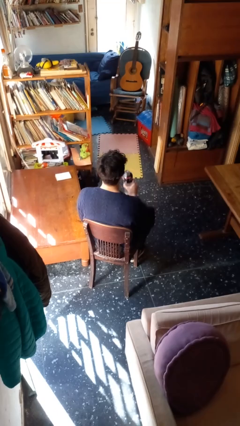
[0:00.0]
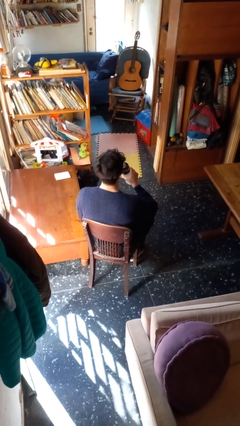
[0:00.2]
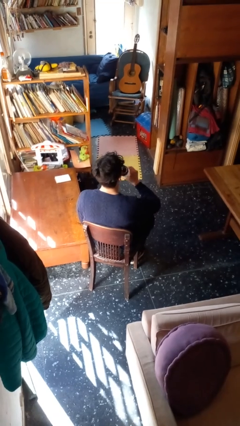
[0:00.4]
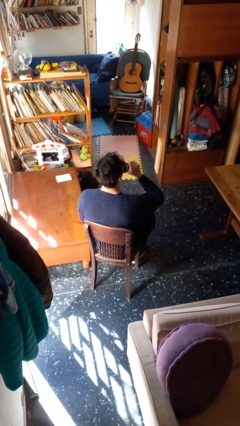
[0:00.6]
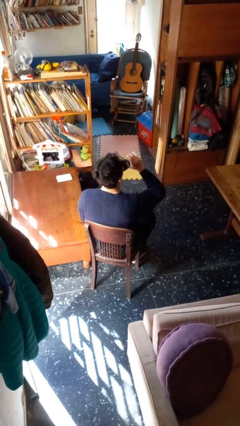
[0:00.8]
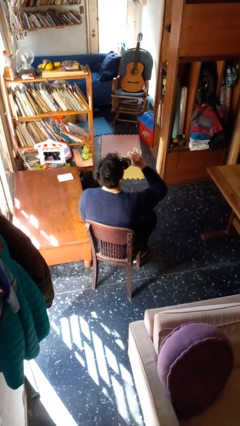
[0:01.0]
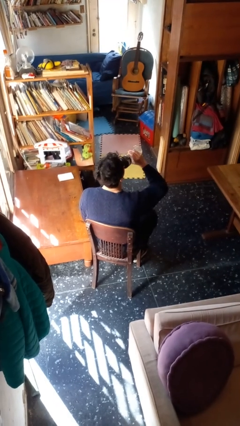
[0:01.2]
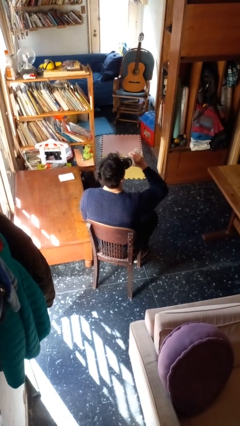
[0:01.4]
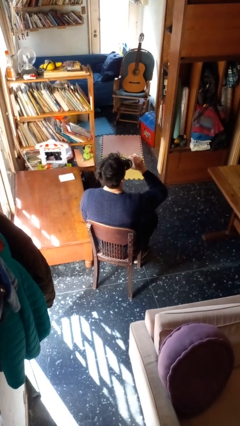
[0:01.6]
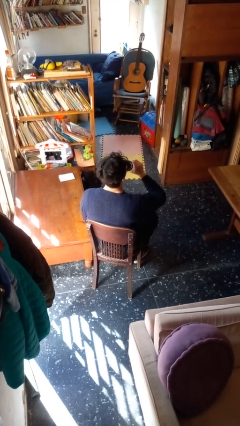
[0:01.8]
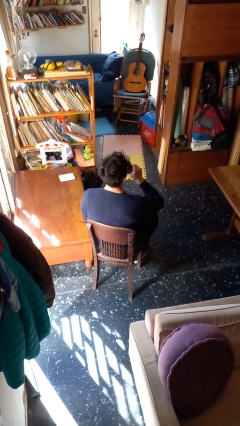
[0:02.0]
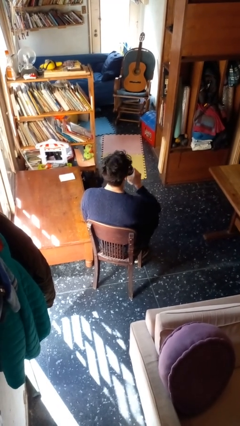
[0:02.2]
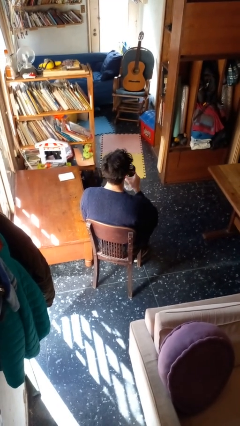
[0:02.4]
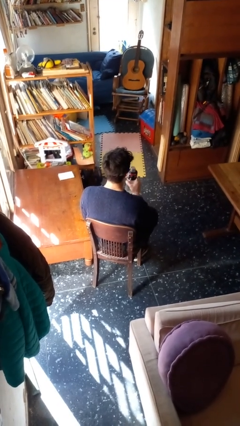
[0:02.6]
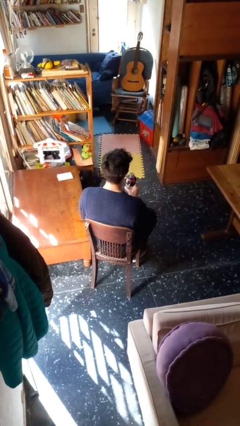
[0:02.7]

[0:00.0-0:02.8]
person drinks from bottle

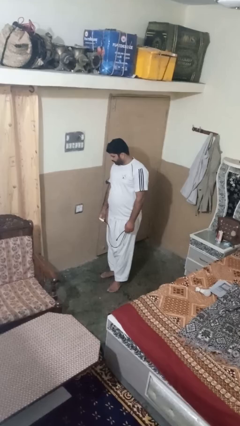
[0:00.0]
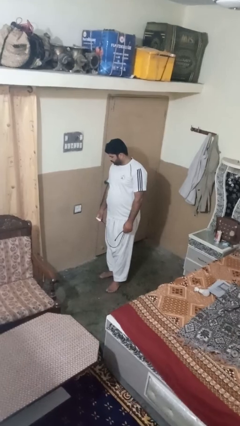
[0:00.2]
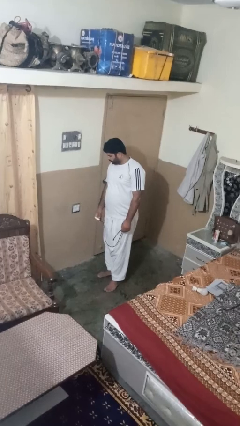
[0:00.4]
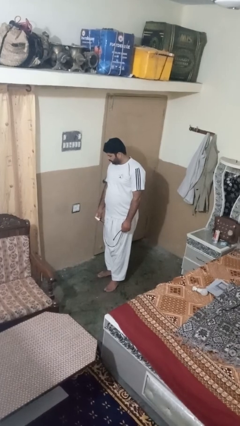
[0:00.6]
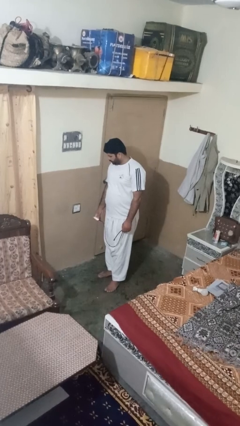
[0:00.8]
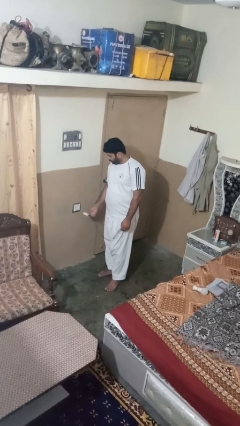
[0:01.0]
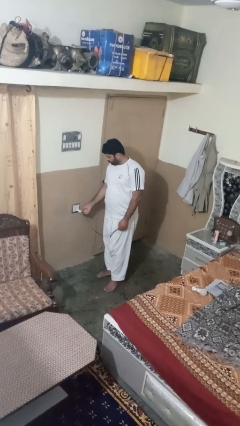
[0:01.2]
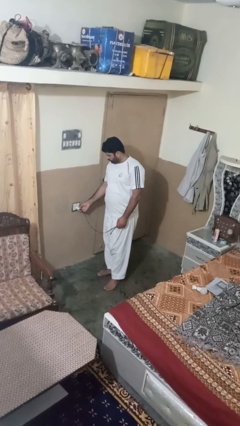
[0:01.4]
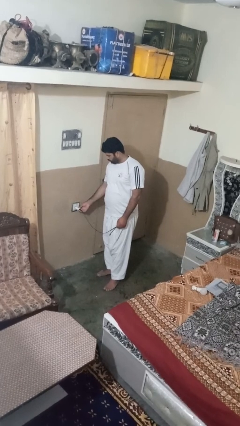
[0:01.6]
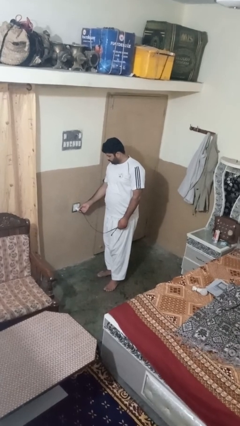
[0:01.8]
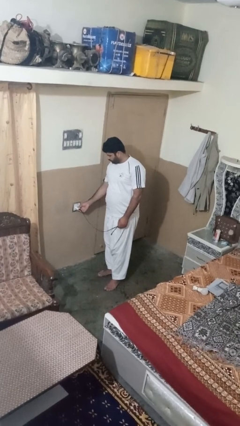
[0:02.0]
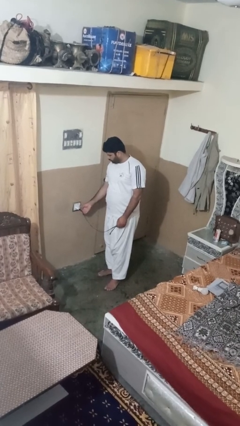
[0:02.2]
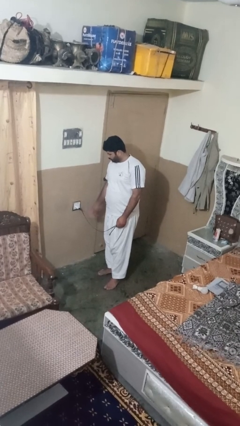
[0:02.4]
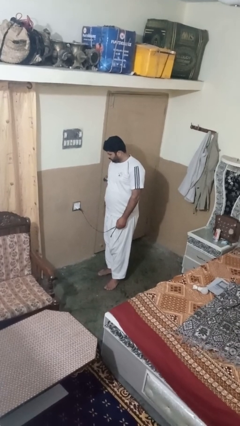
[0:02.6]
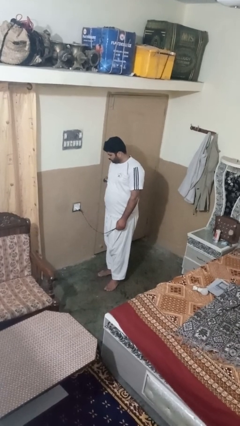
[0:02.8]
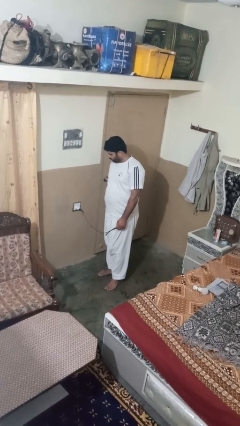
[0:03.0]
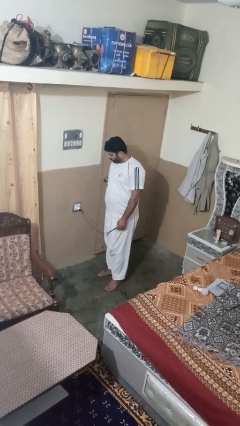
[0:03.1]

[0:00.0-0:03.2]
person plugs into electrical socket

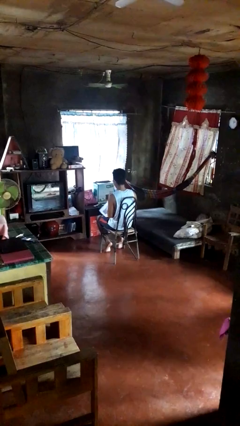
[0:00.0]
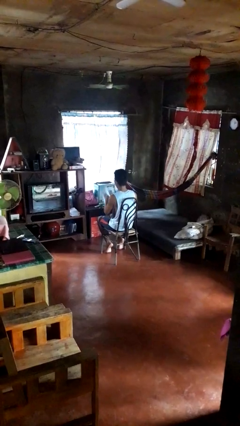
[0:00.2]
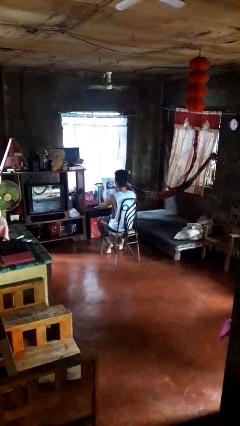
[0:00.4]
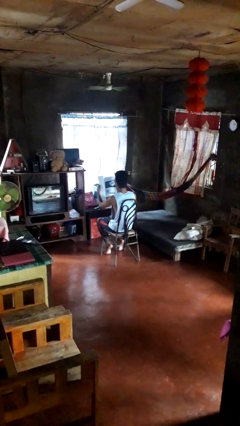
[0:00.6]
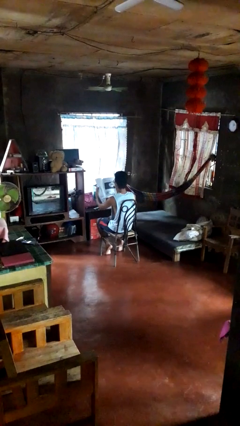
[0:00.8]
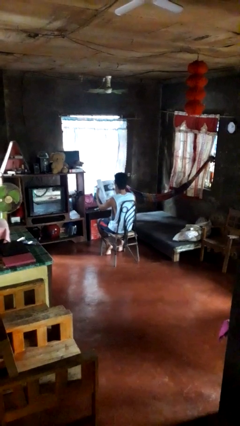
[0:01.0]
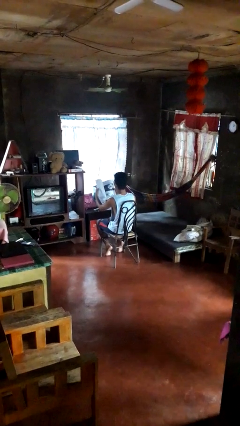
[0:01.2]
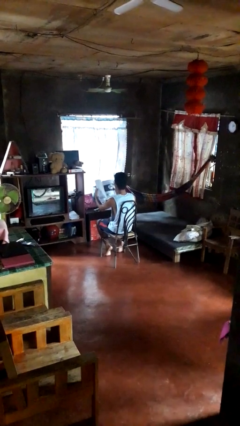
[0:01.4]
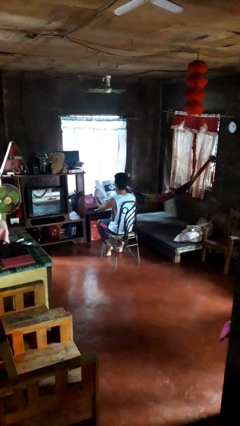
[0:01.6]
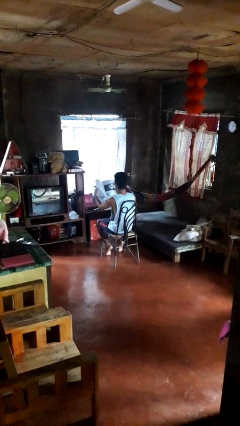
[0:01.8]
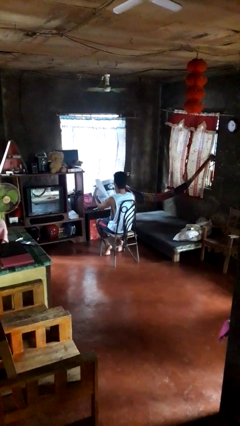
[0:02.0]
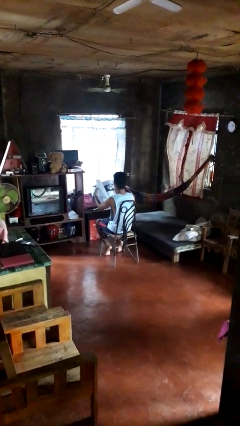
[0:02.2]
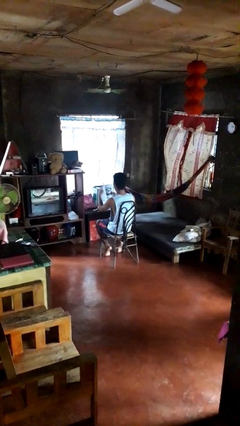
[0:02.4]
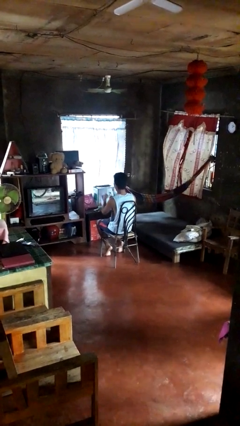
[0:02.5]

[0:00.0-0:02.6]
person reads newspaper

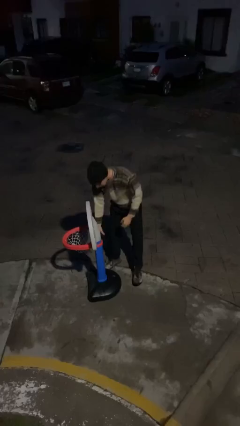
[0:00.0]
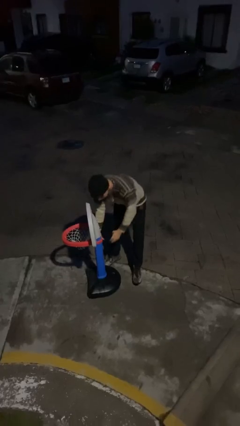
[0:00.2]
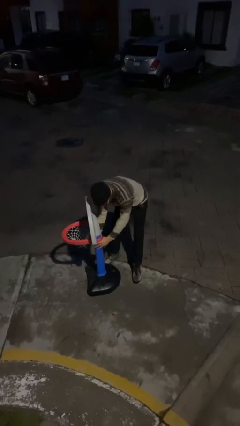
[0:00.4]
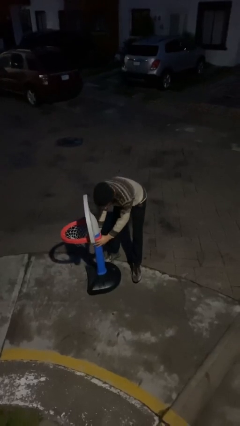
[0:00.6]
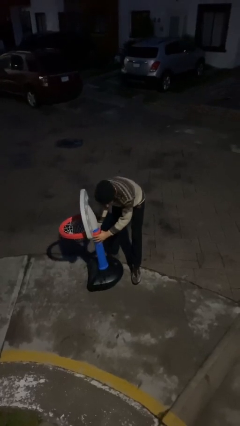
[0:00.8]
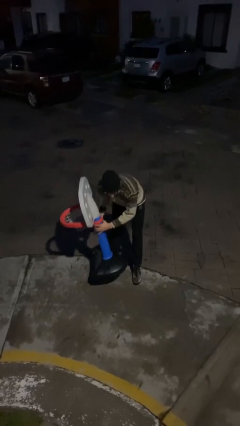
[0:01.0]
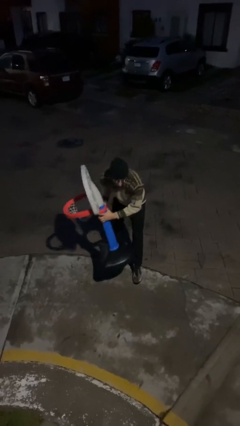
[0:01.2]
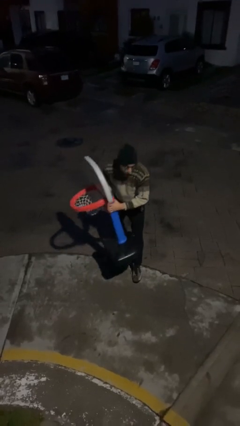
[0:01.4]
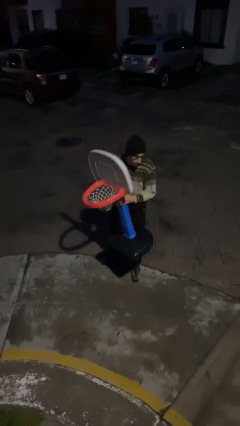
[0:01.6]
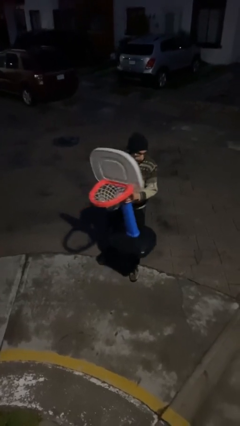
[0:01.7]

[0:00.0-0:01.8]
person picks up object from floor

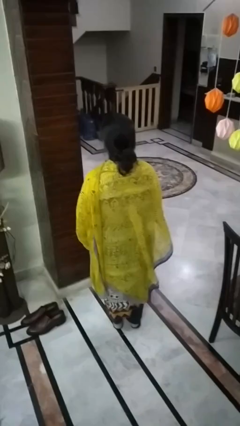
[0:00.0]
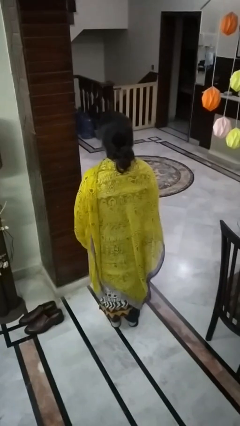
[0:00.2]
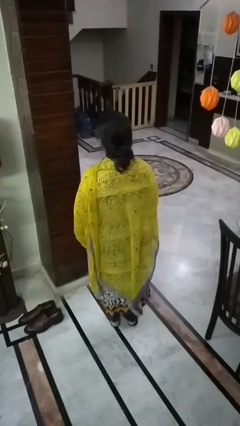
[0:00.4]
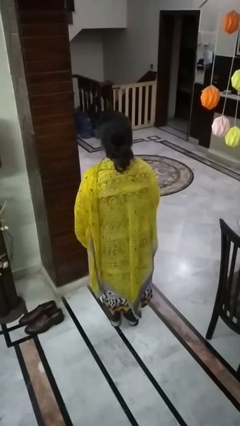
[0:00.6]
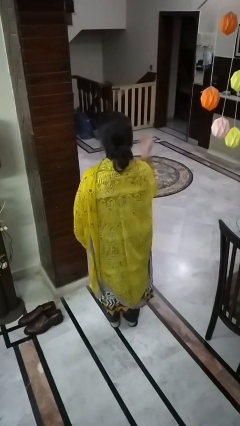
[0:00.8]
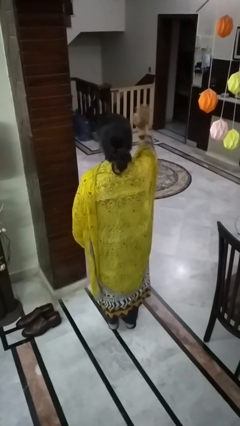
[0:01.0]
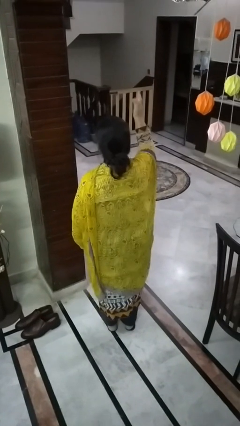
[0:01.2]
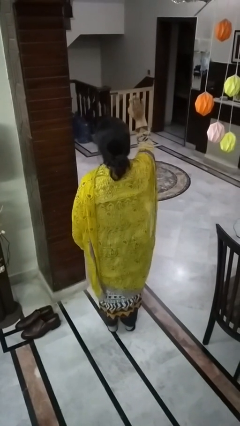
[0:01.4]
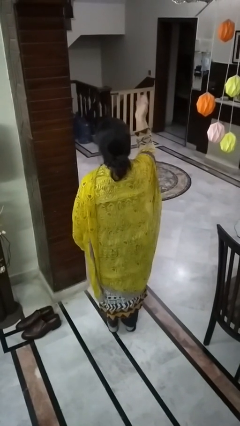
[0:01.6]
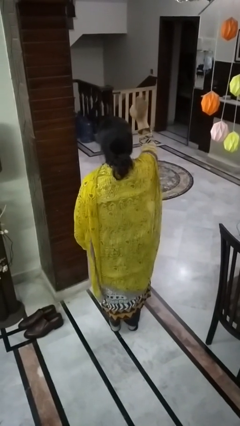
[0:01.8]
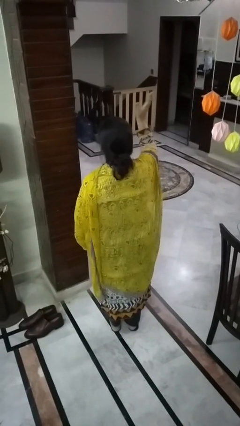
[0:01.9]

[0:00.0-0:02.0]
person waves at person

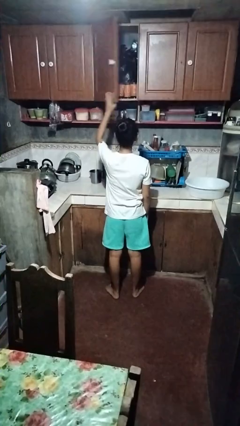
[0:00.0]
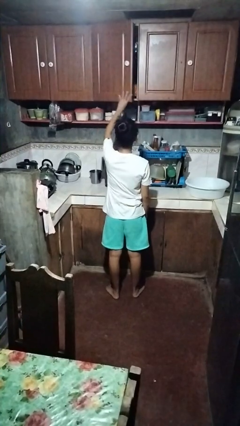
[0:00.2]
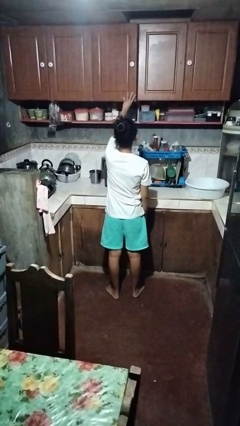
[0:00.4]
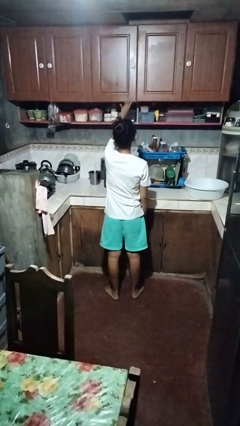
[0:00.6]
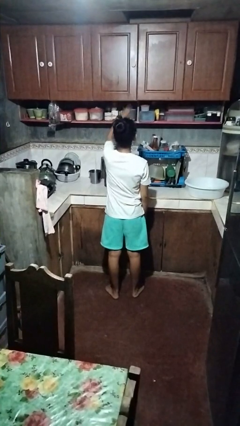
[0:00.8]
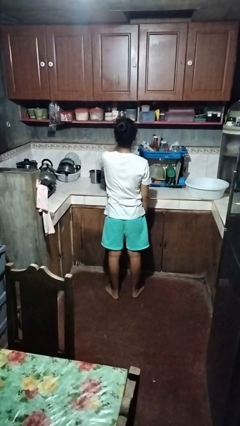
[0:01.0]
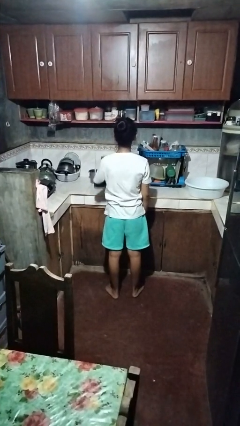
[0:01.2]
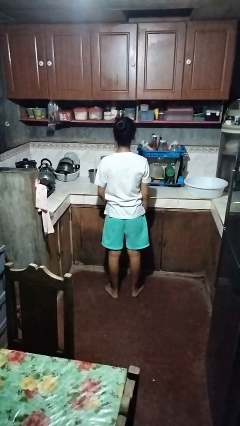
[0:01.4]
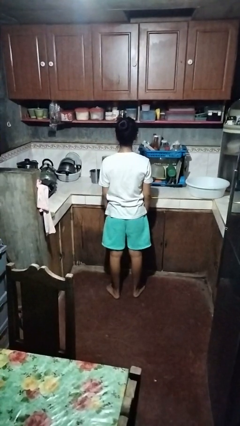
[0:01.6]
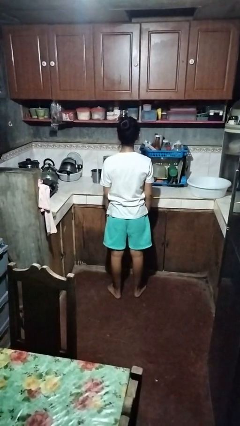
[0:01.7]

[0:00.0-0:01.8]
person closes cabinet

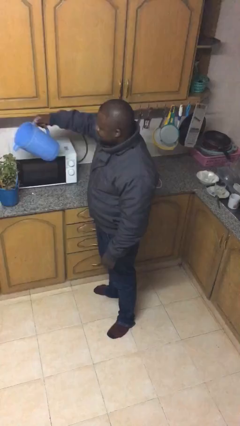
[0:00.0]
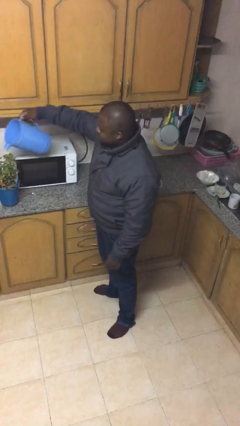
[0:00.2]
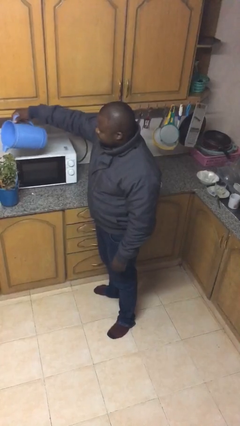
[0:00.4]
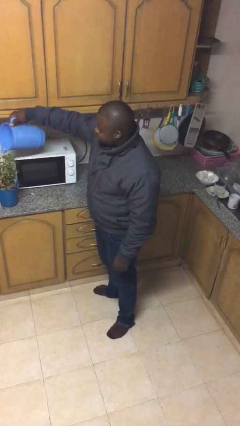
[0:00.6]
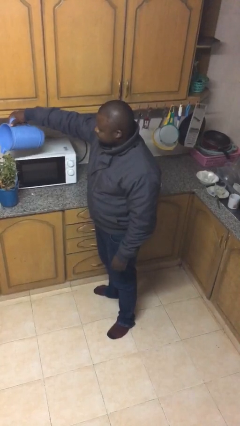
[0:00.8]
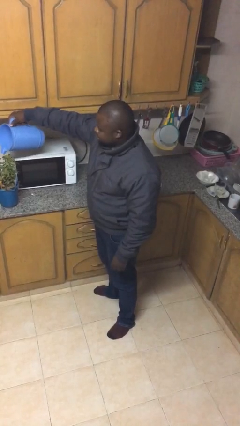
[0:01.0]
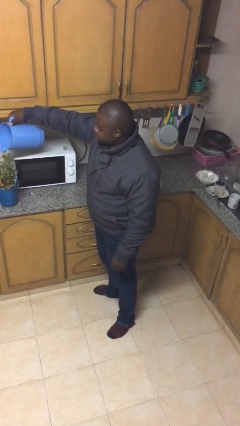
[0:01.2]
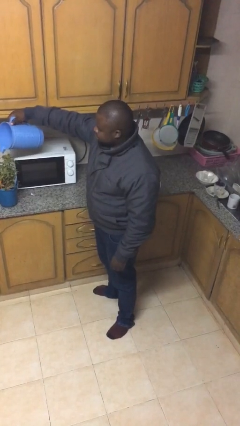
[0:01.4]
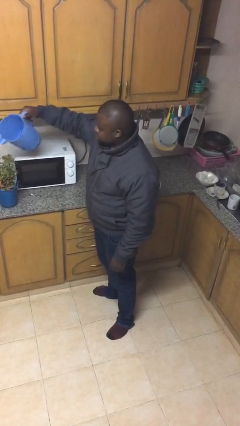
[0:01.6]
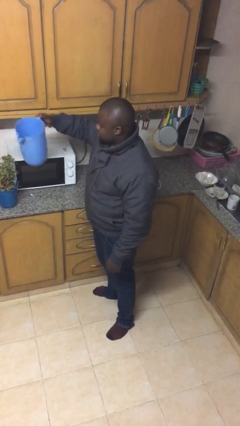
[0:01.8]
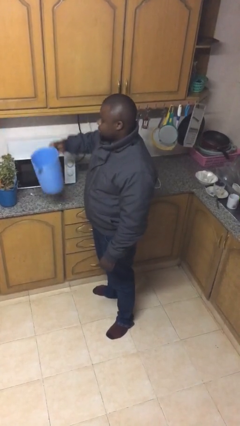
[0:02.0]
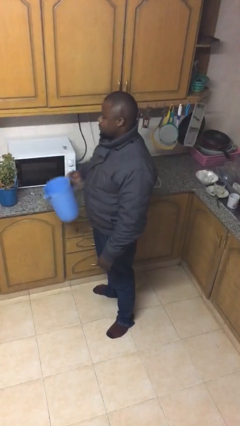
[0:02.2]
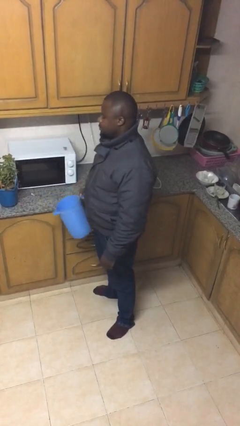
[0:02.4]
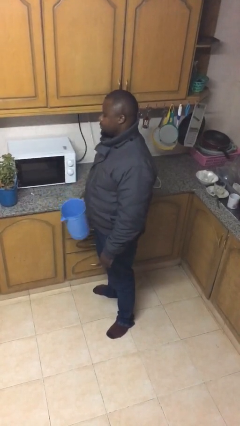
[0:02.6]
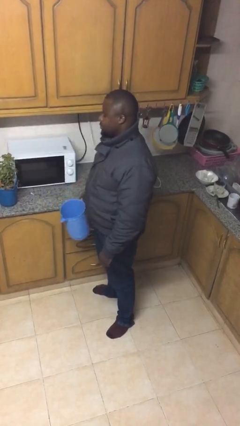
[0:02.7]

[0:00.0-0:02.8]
person waters houseplant

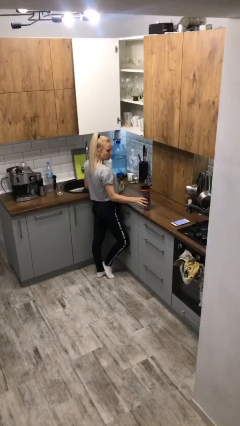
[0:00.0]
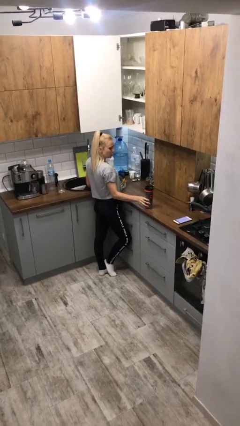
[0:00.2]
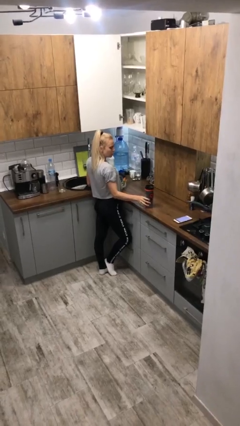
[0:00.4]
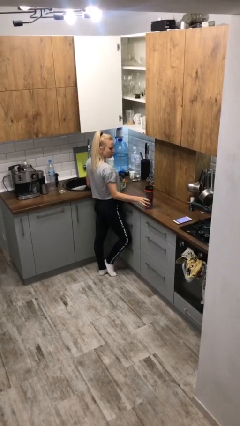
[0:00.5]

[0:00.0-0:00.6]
person puts down object on table
